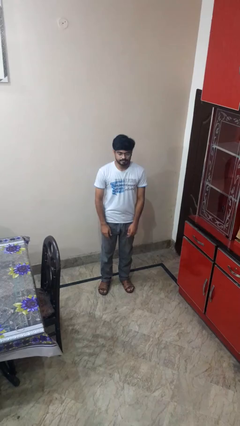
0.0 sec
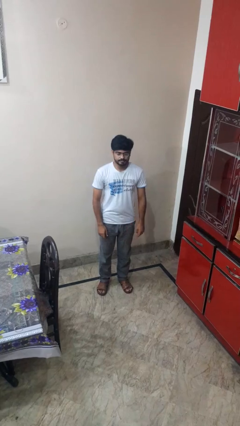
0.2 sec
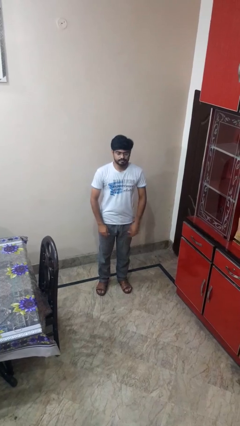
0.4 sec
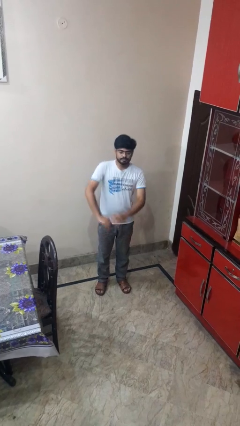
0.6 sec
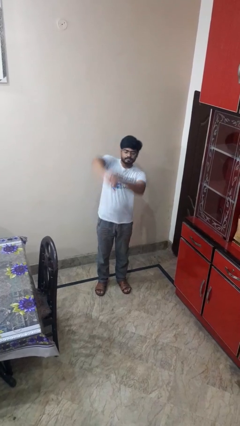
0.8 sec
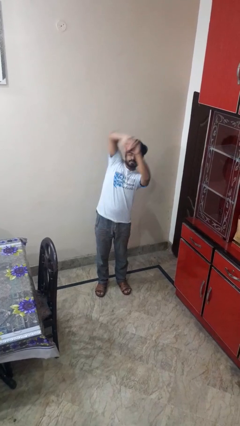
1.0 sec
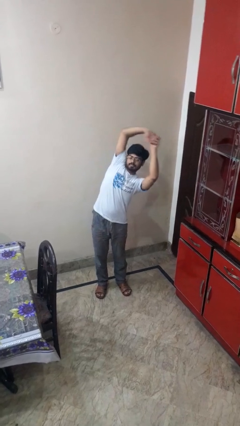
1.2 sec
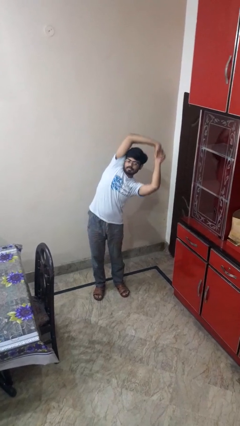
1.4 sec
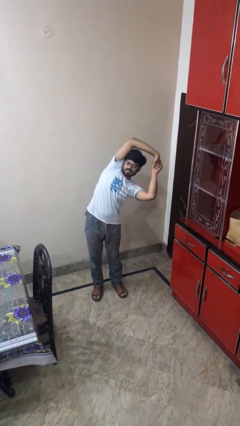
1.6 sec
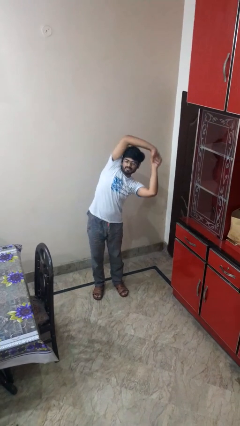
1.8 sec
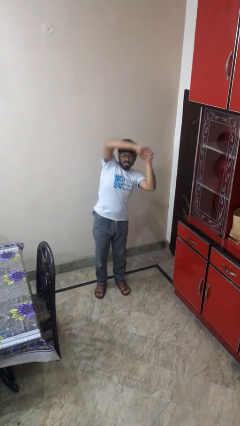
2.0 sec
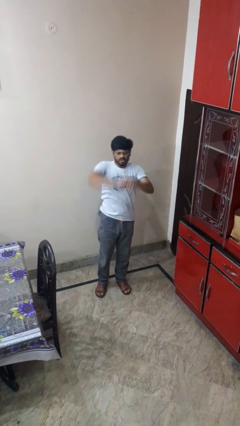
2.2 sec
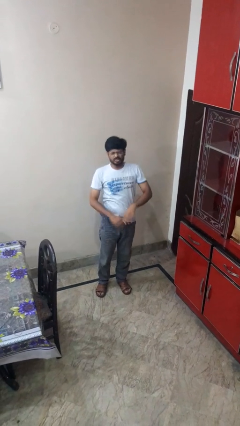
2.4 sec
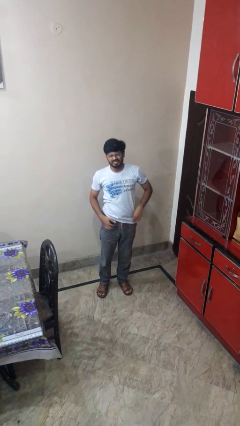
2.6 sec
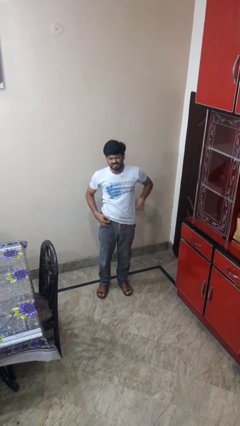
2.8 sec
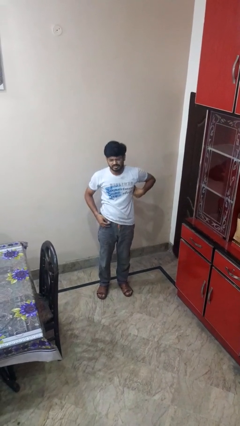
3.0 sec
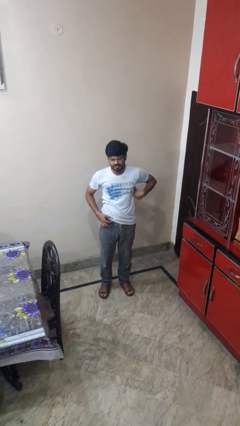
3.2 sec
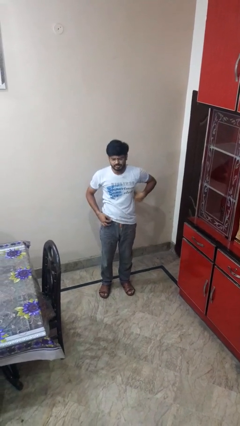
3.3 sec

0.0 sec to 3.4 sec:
person stretches arms to side

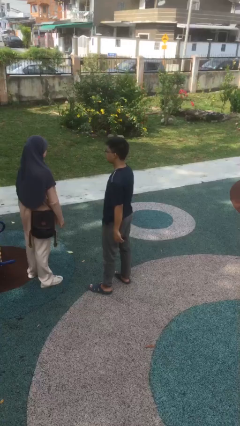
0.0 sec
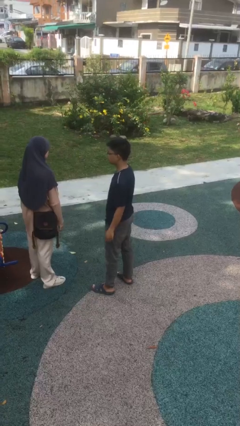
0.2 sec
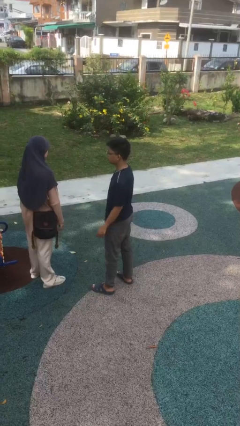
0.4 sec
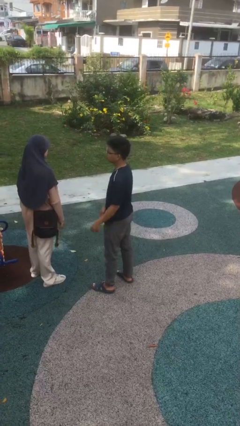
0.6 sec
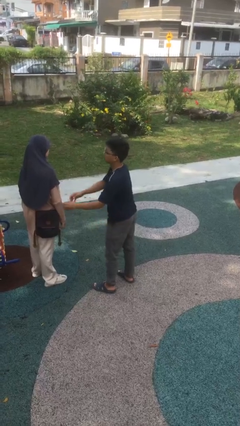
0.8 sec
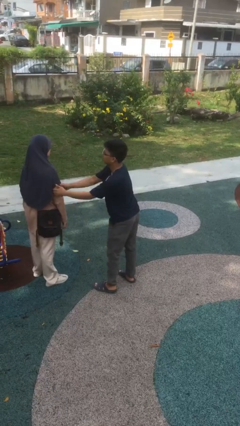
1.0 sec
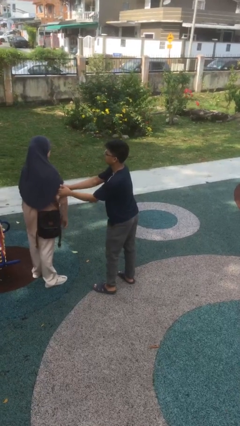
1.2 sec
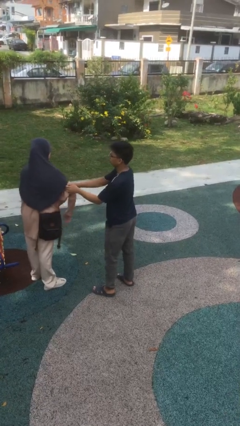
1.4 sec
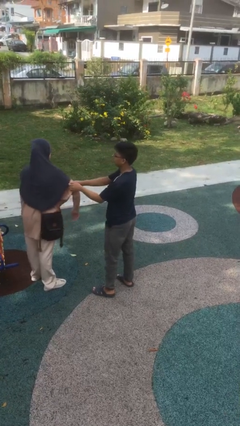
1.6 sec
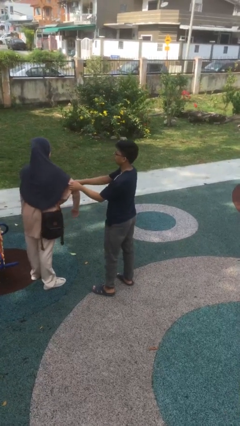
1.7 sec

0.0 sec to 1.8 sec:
person grabs person by bicep

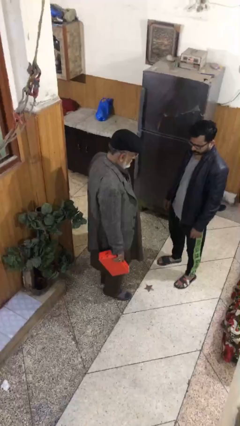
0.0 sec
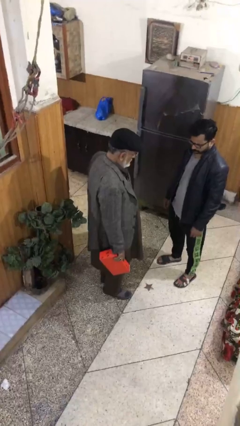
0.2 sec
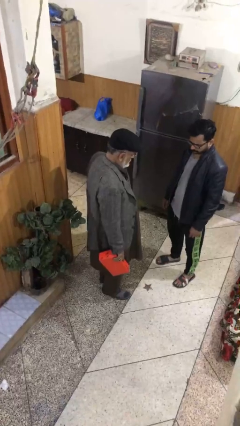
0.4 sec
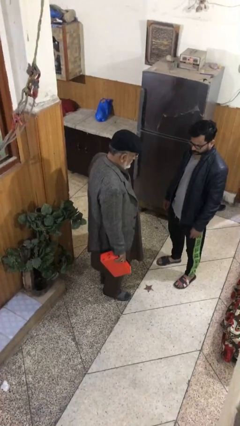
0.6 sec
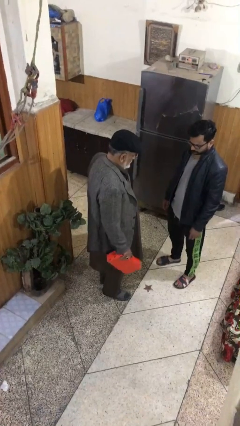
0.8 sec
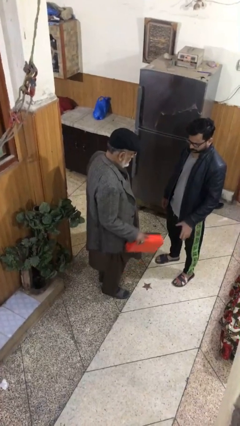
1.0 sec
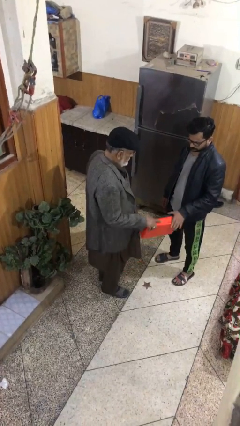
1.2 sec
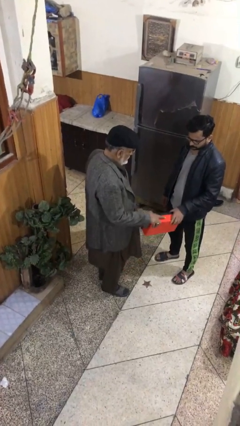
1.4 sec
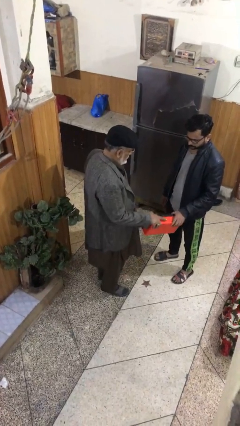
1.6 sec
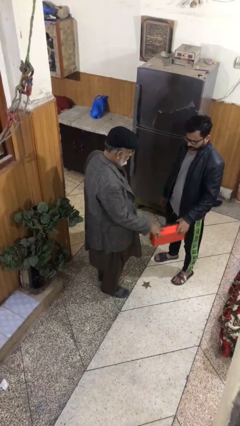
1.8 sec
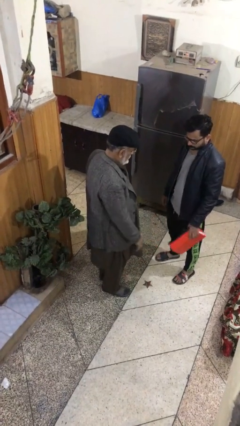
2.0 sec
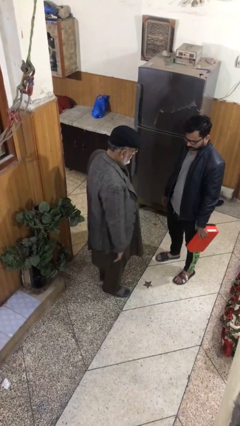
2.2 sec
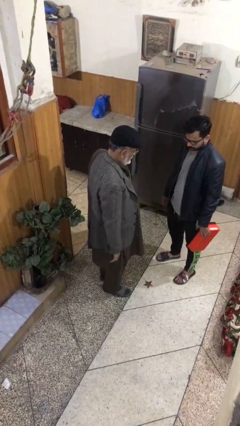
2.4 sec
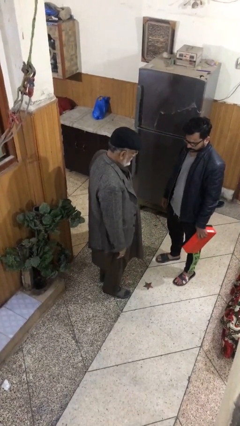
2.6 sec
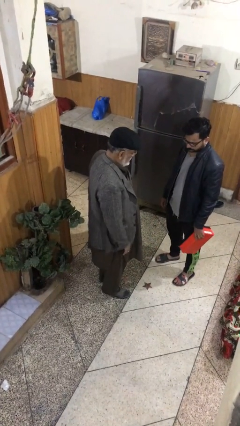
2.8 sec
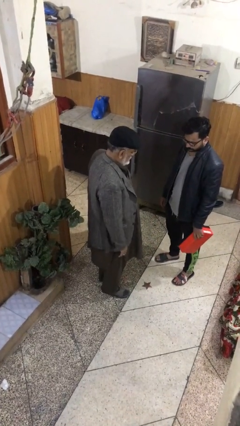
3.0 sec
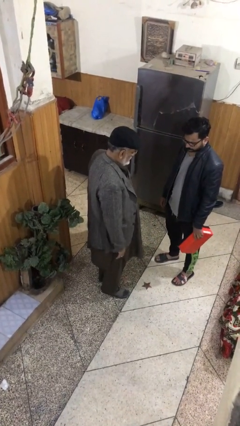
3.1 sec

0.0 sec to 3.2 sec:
person transfers object to person

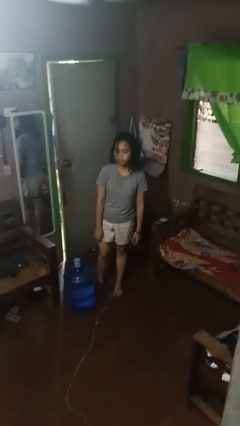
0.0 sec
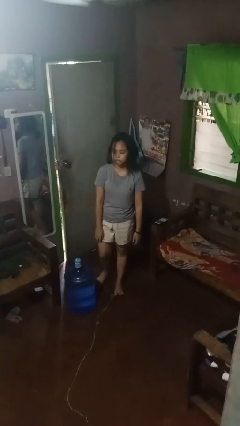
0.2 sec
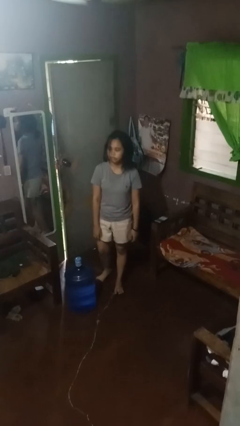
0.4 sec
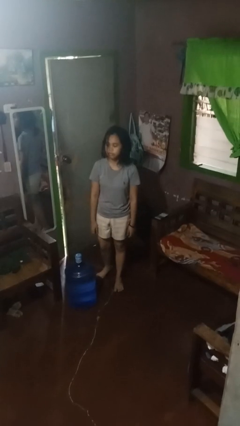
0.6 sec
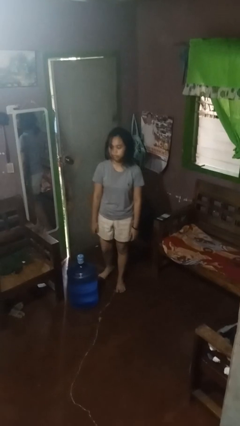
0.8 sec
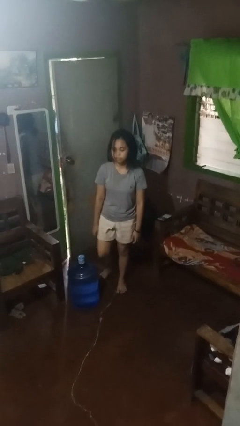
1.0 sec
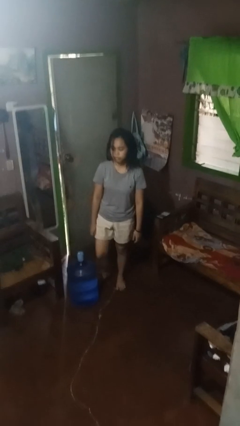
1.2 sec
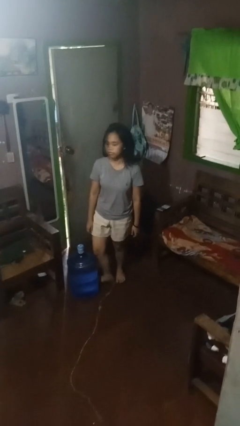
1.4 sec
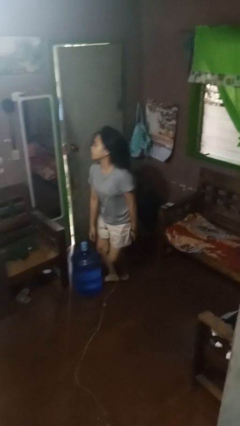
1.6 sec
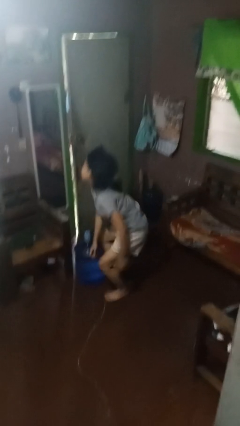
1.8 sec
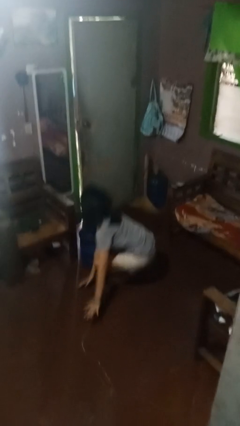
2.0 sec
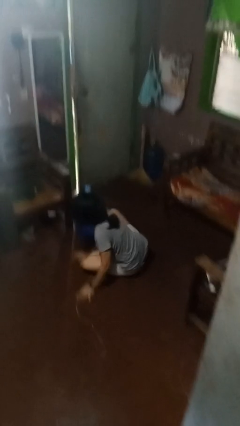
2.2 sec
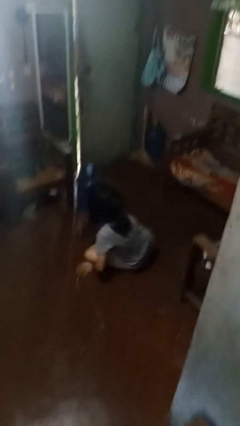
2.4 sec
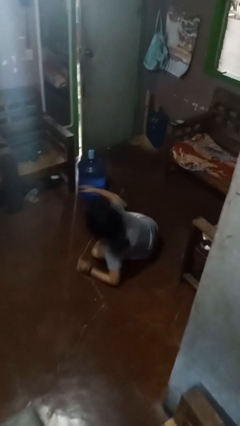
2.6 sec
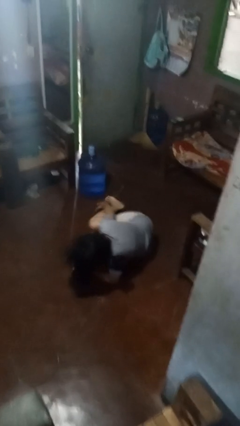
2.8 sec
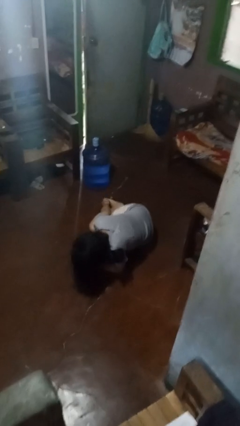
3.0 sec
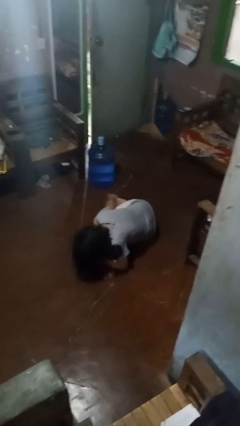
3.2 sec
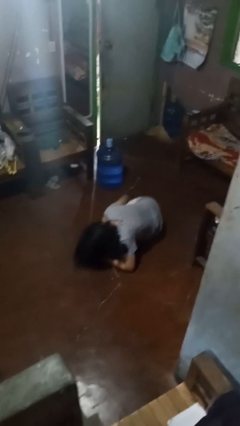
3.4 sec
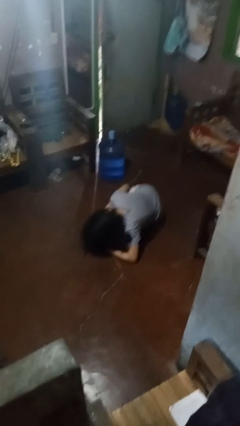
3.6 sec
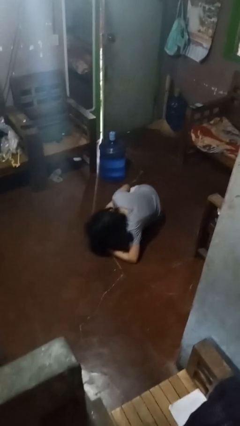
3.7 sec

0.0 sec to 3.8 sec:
person trips on object on floor

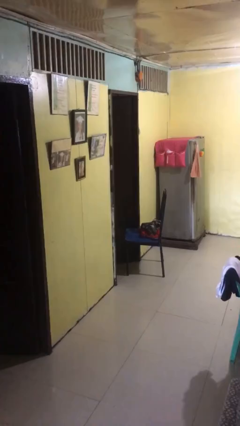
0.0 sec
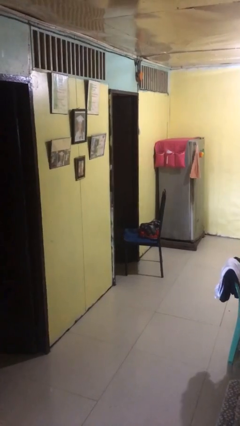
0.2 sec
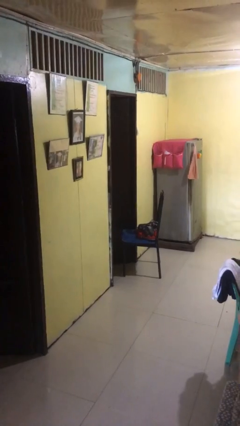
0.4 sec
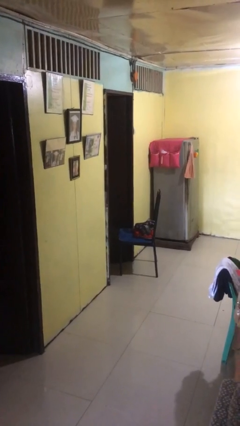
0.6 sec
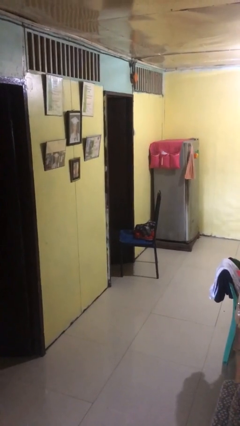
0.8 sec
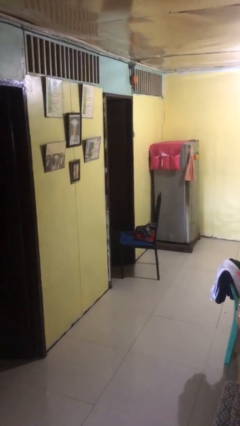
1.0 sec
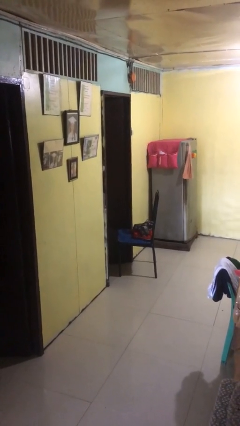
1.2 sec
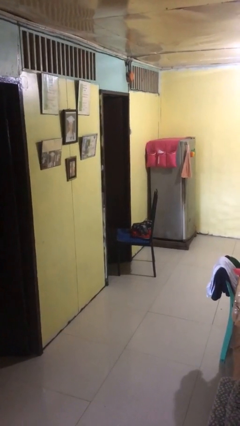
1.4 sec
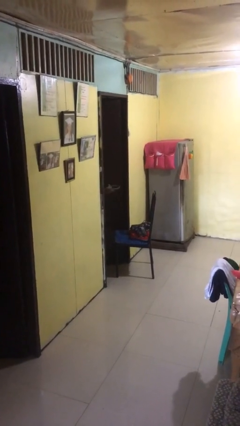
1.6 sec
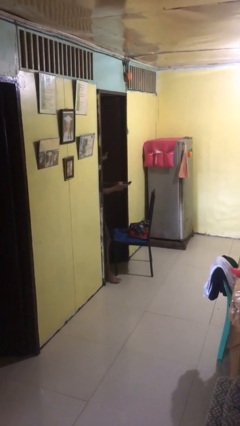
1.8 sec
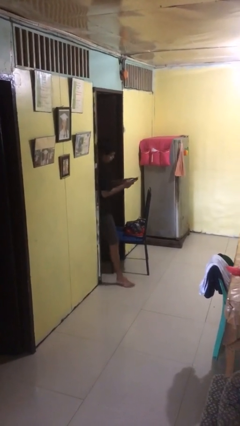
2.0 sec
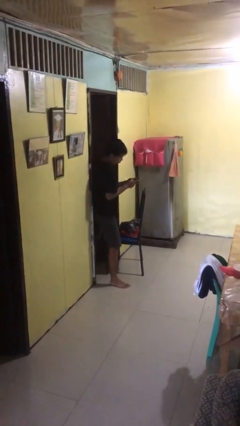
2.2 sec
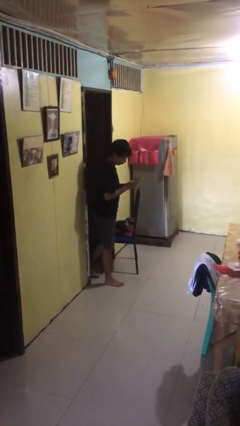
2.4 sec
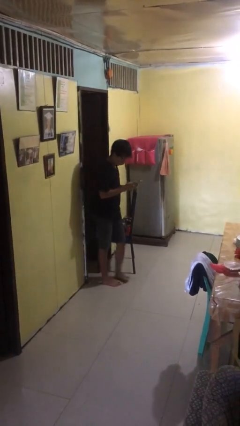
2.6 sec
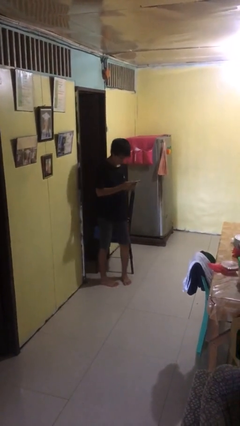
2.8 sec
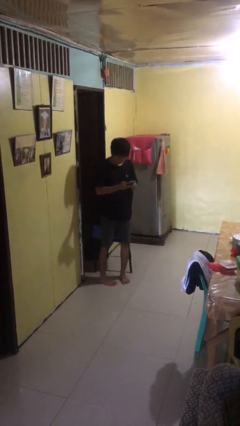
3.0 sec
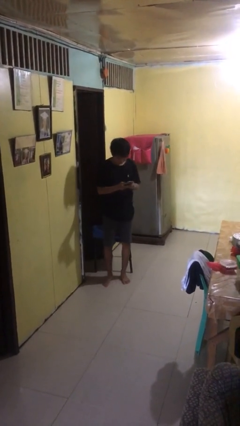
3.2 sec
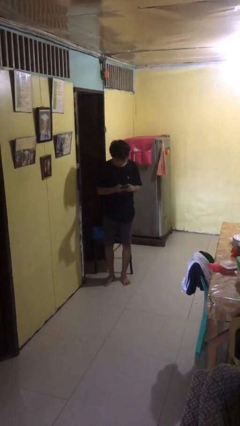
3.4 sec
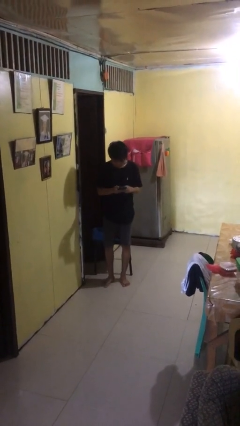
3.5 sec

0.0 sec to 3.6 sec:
person enters scene through structure

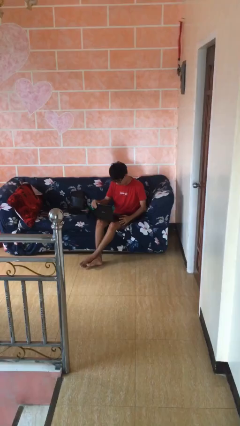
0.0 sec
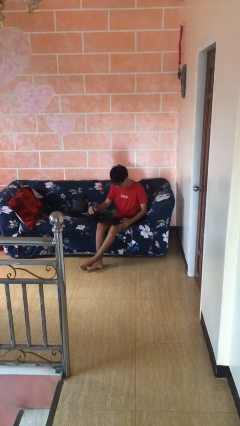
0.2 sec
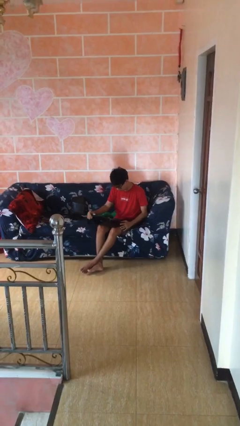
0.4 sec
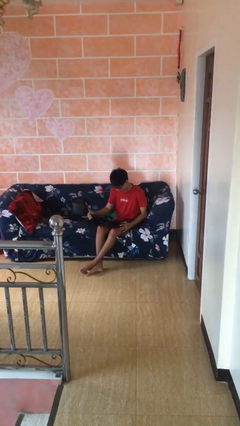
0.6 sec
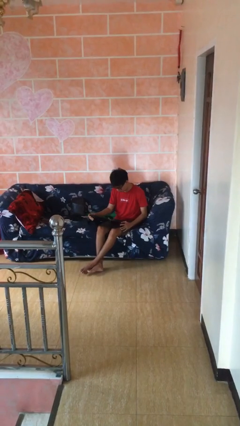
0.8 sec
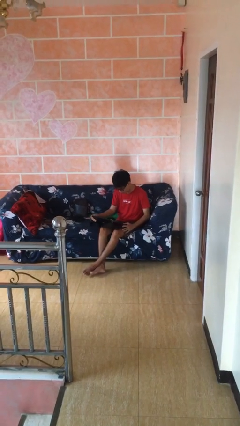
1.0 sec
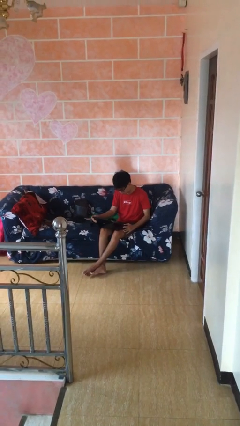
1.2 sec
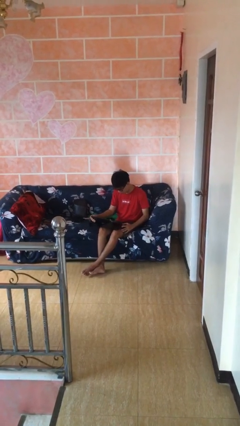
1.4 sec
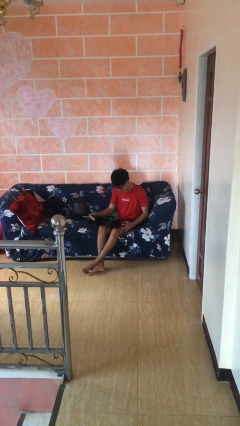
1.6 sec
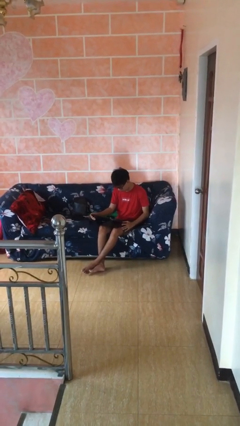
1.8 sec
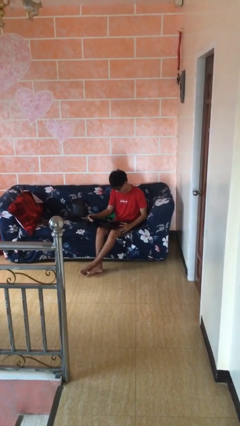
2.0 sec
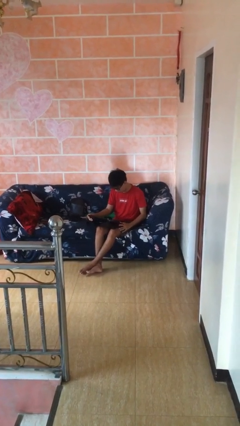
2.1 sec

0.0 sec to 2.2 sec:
person interacts with laptop
